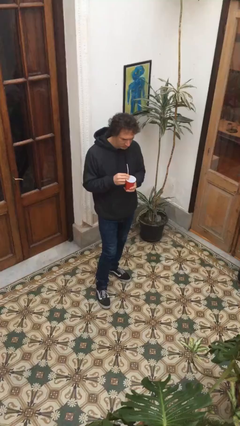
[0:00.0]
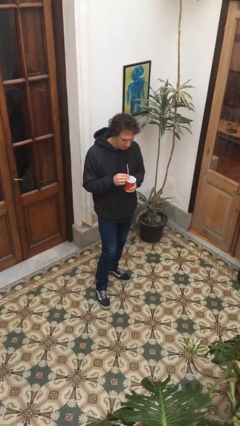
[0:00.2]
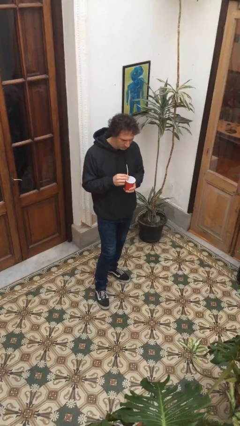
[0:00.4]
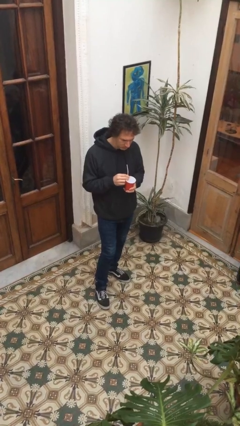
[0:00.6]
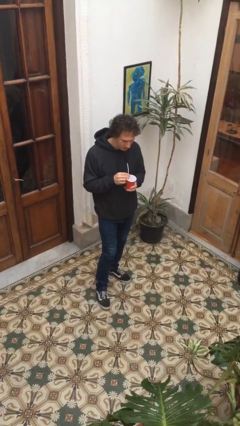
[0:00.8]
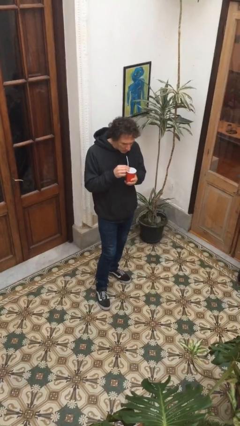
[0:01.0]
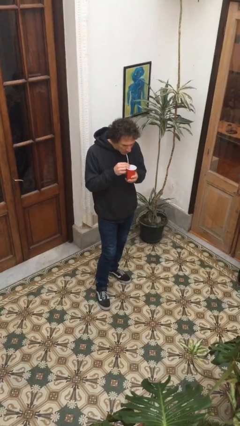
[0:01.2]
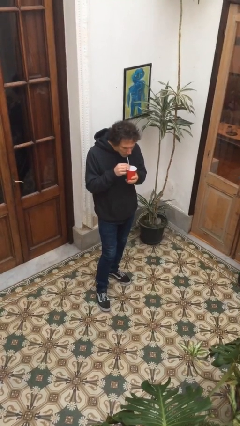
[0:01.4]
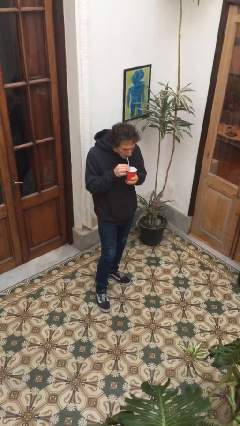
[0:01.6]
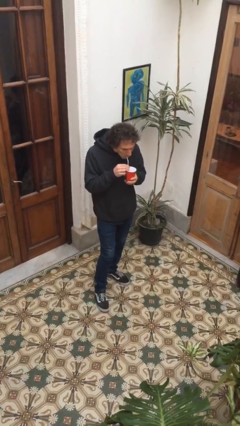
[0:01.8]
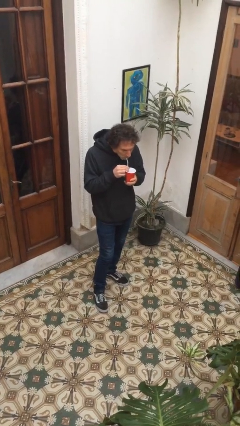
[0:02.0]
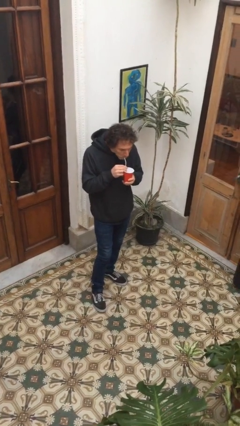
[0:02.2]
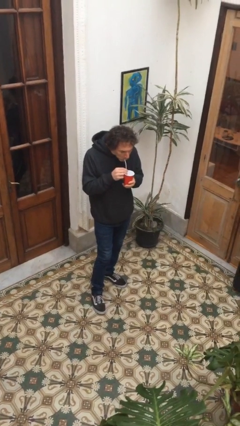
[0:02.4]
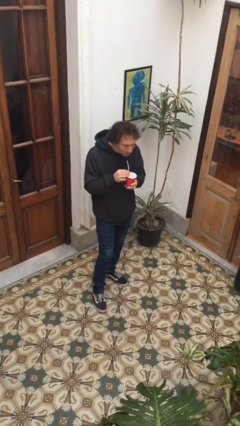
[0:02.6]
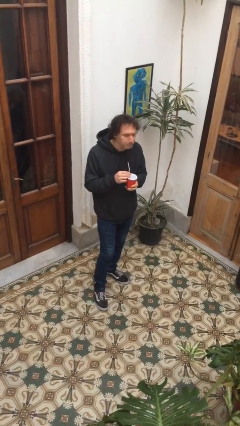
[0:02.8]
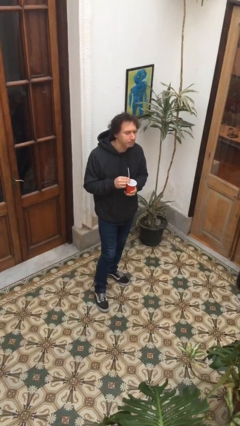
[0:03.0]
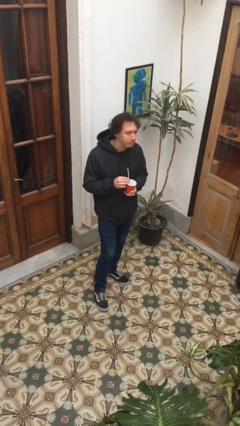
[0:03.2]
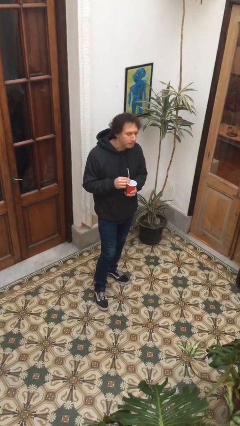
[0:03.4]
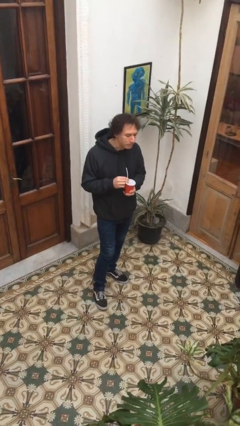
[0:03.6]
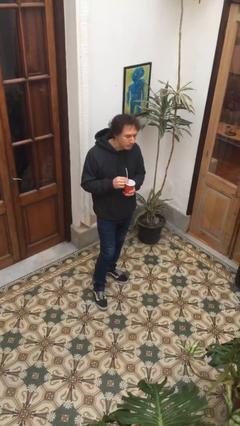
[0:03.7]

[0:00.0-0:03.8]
person drinks from straw

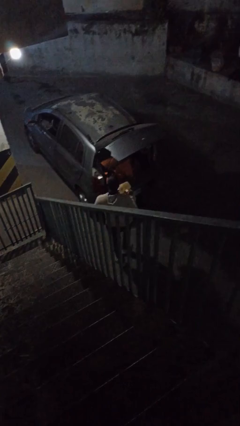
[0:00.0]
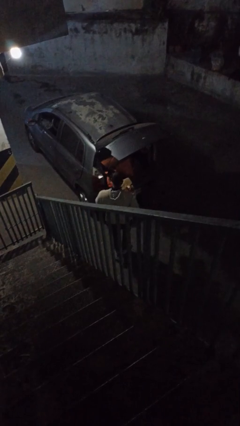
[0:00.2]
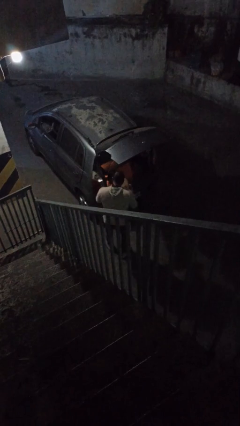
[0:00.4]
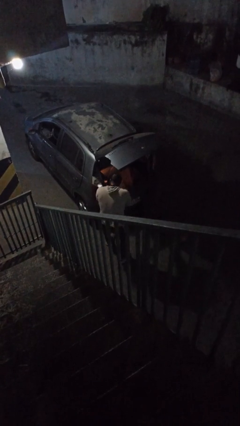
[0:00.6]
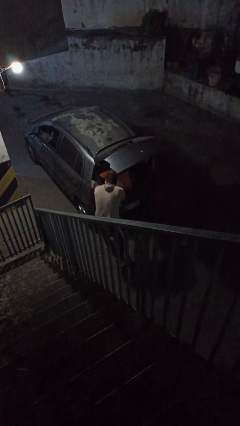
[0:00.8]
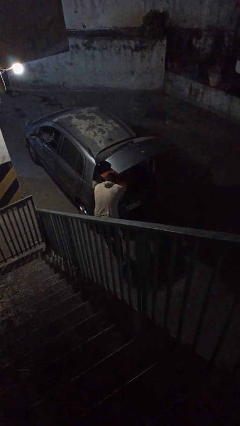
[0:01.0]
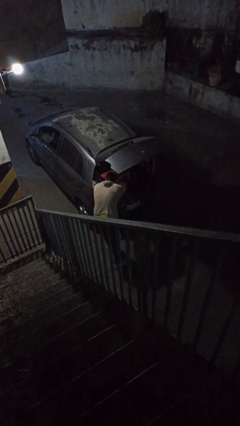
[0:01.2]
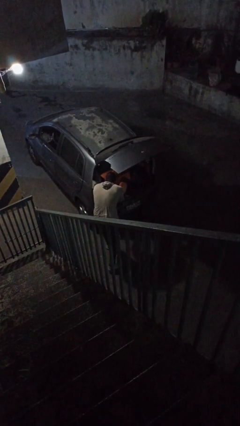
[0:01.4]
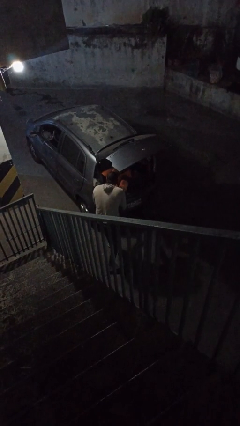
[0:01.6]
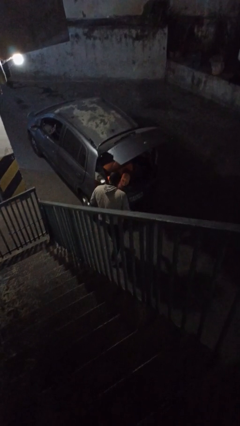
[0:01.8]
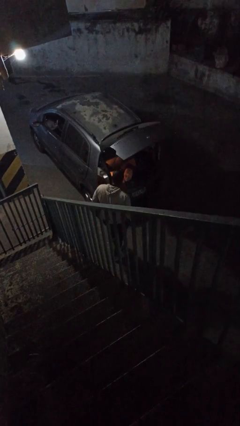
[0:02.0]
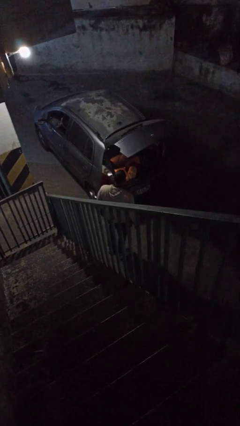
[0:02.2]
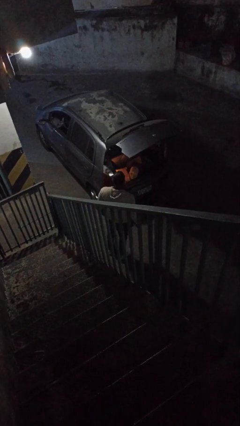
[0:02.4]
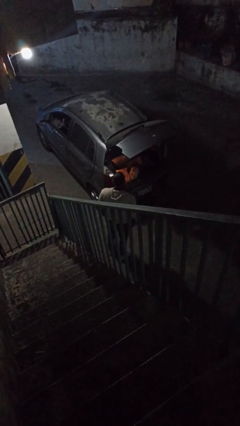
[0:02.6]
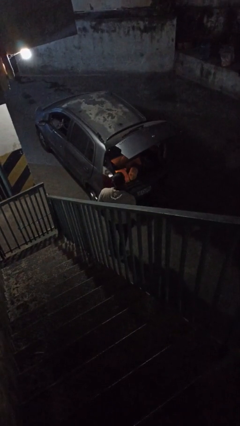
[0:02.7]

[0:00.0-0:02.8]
person loads car

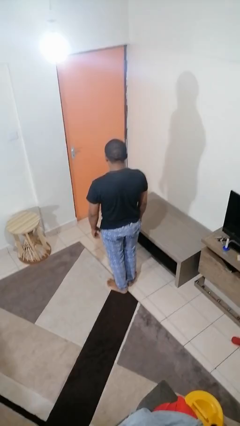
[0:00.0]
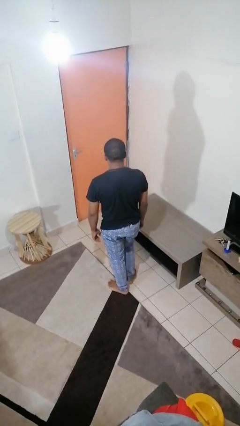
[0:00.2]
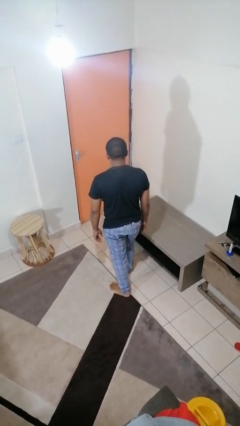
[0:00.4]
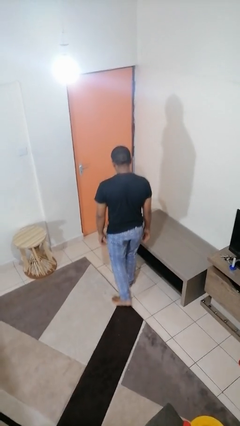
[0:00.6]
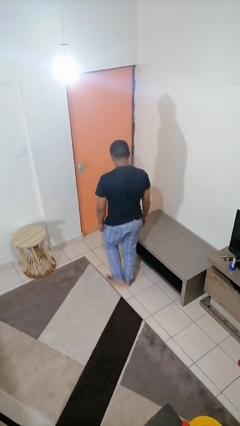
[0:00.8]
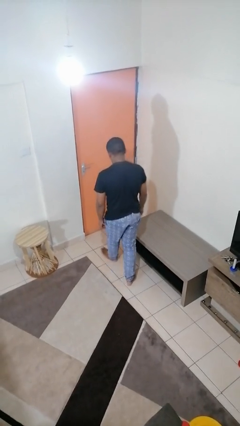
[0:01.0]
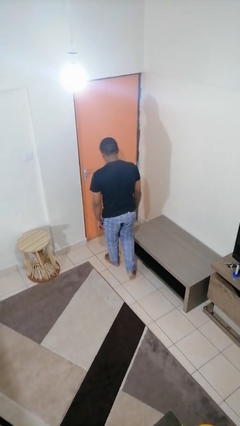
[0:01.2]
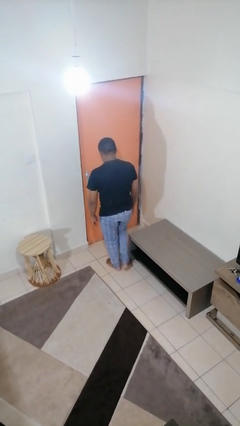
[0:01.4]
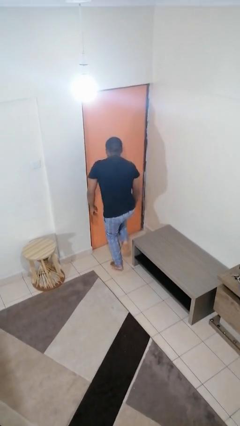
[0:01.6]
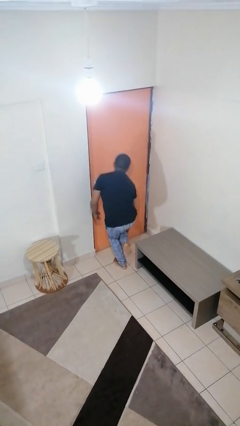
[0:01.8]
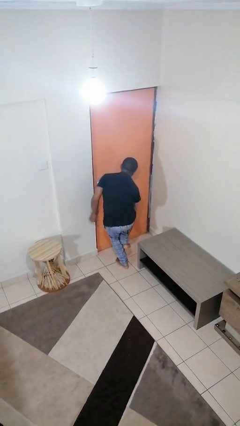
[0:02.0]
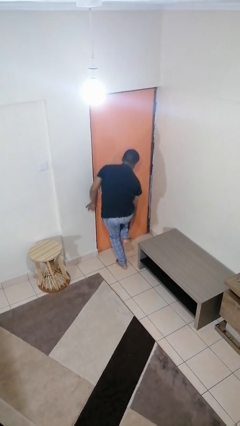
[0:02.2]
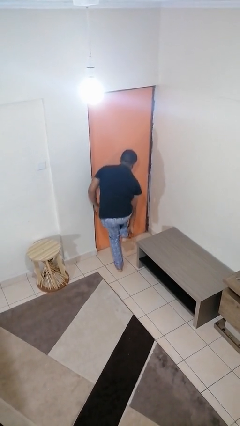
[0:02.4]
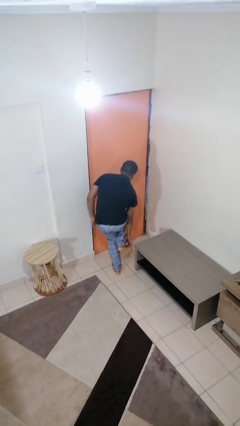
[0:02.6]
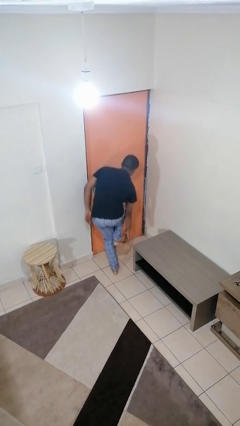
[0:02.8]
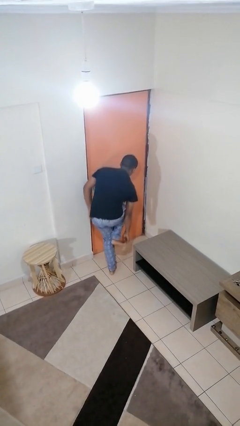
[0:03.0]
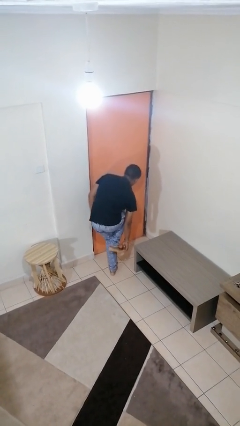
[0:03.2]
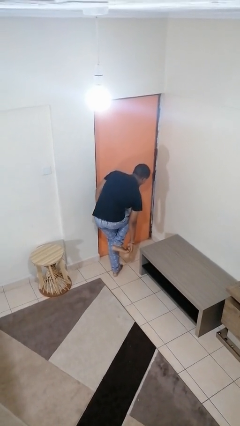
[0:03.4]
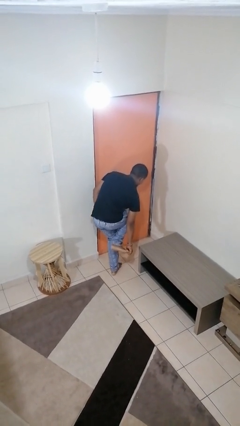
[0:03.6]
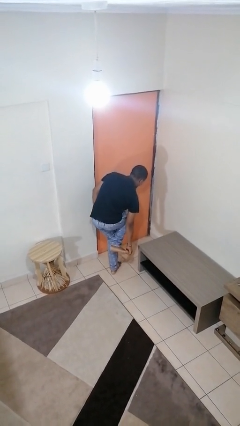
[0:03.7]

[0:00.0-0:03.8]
person stubs toe

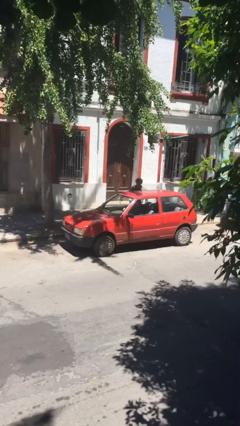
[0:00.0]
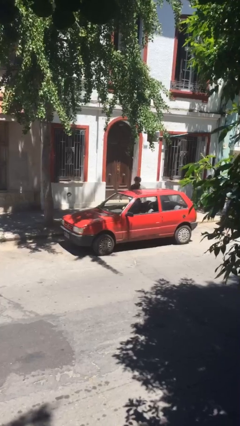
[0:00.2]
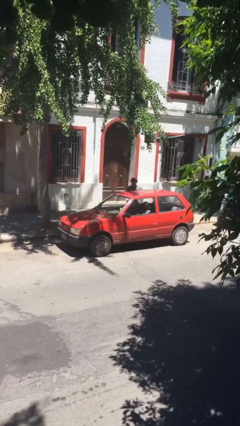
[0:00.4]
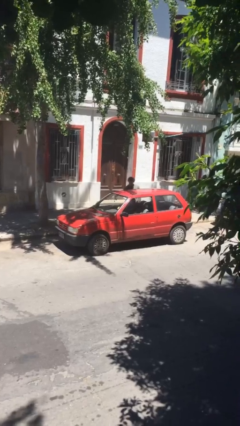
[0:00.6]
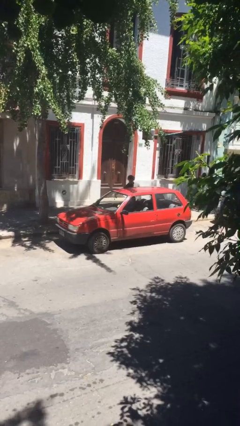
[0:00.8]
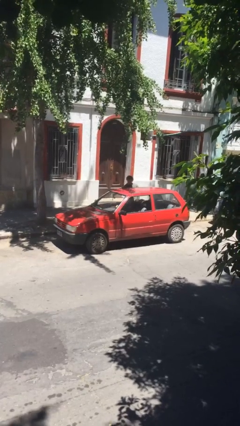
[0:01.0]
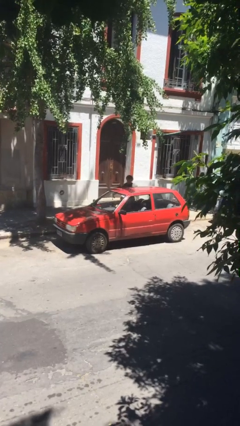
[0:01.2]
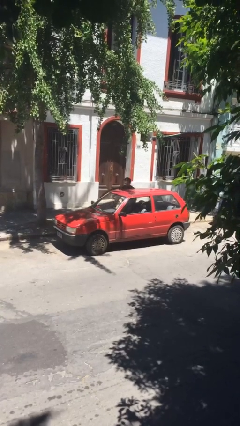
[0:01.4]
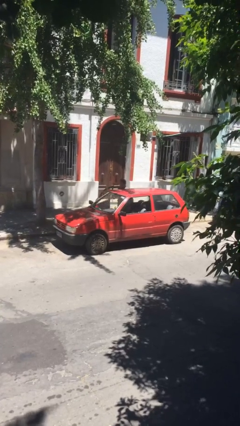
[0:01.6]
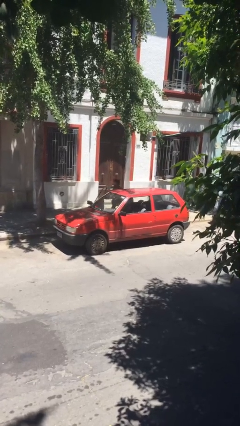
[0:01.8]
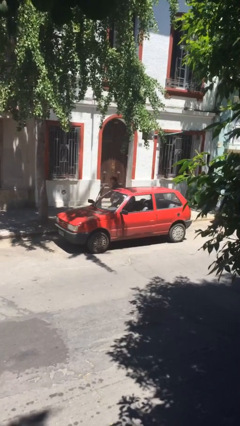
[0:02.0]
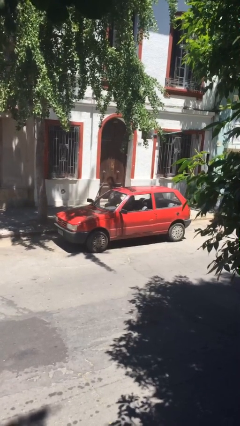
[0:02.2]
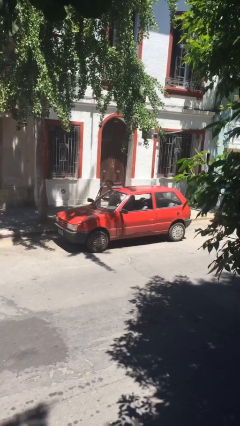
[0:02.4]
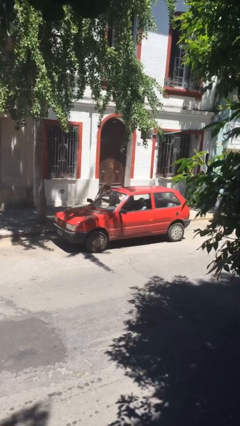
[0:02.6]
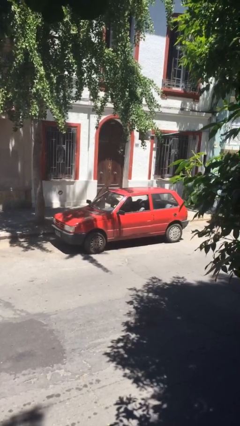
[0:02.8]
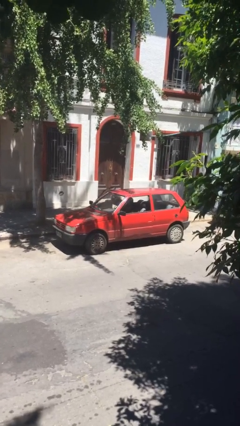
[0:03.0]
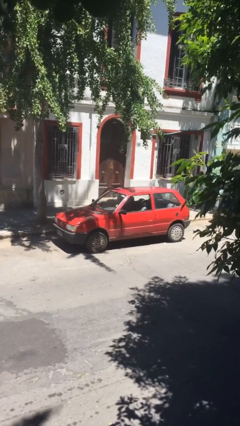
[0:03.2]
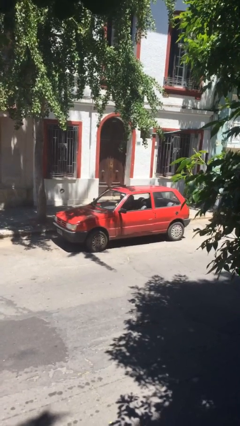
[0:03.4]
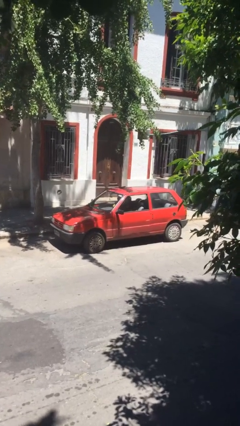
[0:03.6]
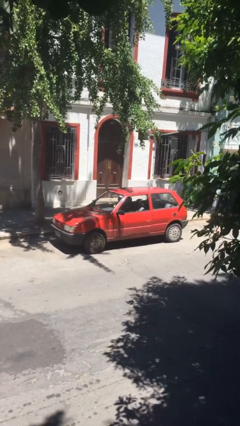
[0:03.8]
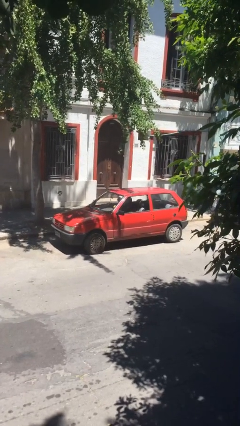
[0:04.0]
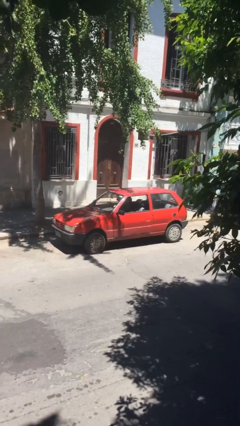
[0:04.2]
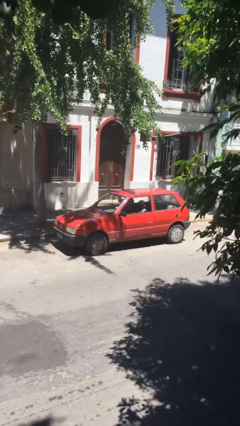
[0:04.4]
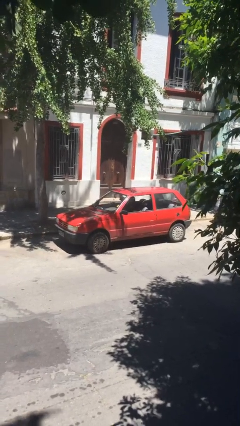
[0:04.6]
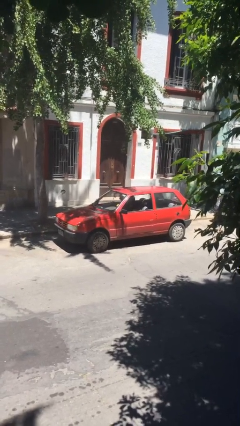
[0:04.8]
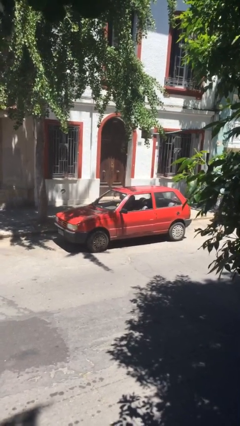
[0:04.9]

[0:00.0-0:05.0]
car picks up person

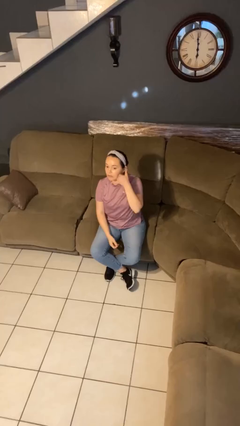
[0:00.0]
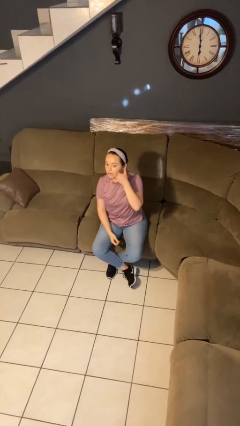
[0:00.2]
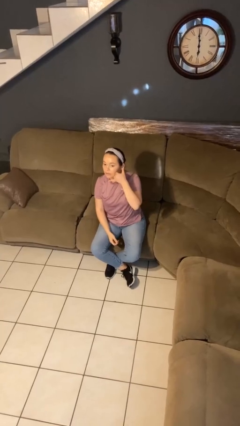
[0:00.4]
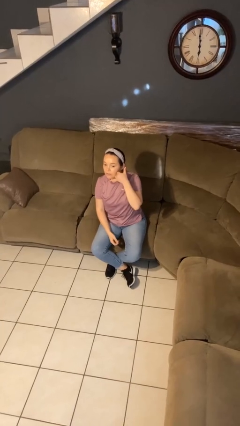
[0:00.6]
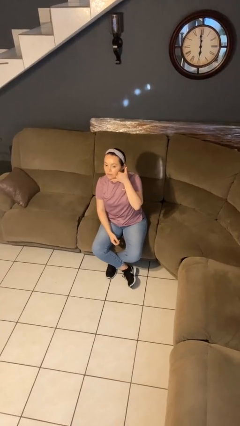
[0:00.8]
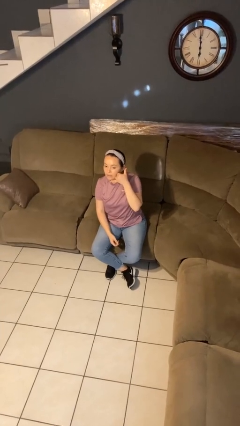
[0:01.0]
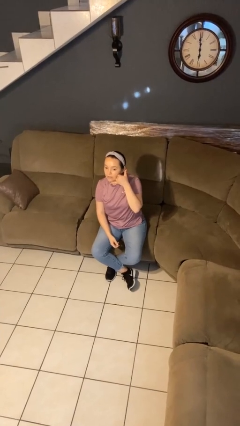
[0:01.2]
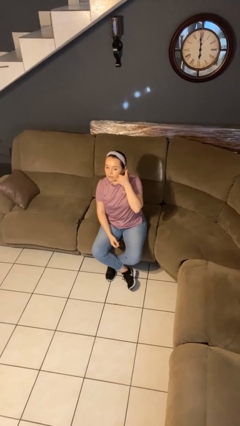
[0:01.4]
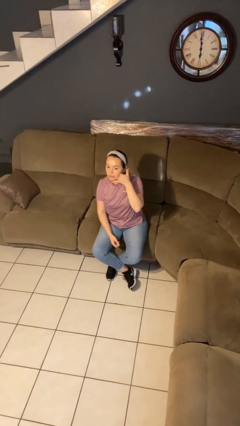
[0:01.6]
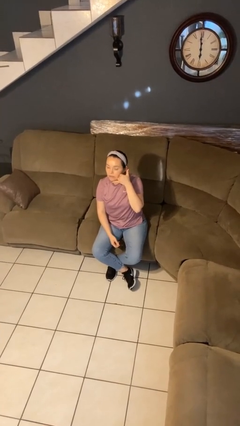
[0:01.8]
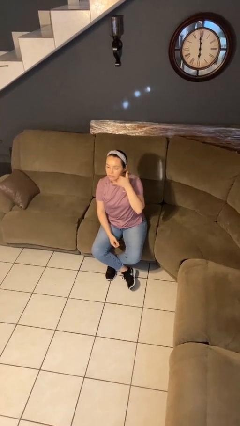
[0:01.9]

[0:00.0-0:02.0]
person gestures call me
